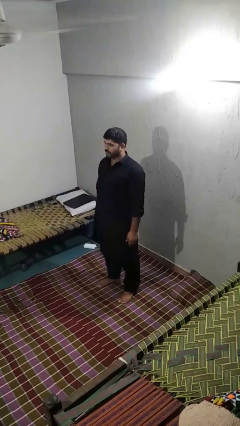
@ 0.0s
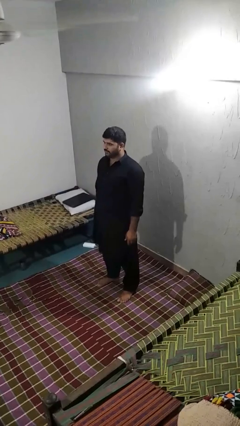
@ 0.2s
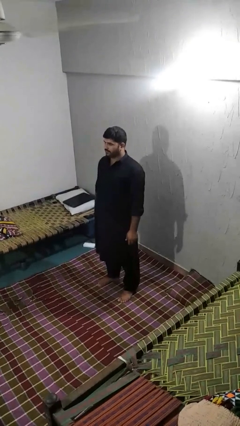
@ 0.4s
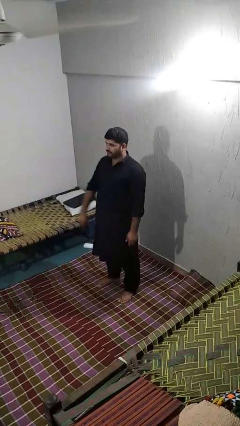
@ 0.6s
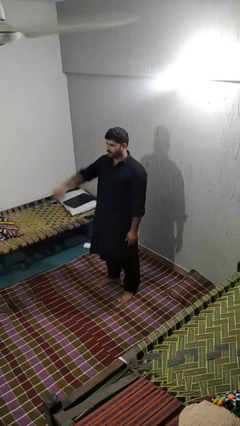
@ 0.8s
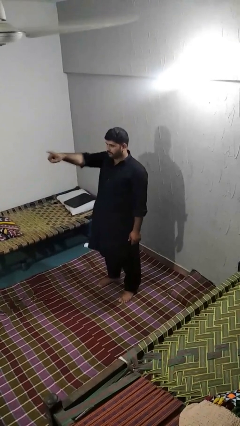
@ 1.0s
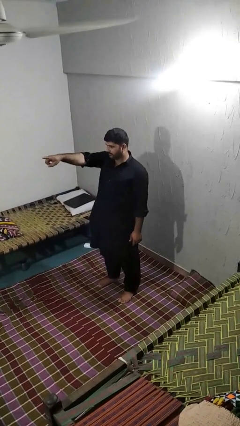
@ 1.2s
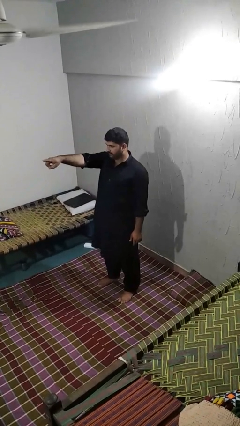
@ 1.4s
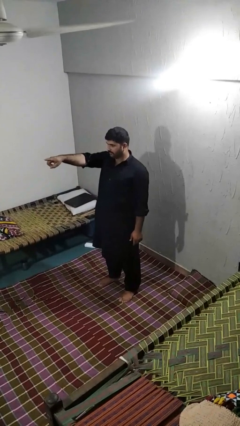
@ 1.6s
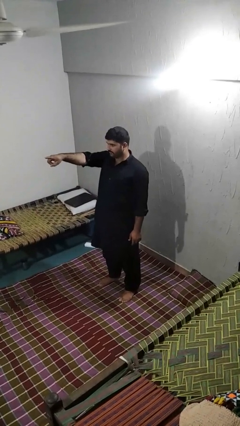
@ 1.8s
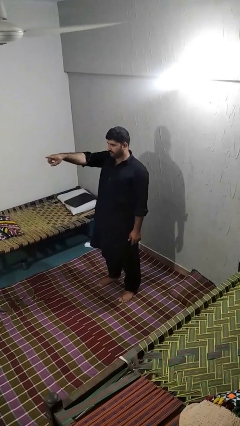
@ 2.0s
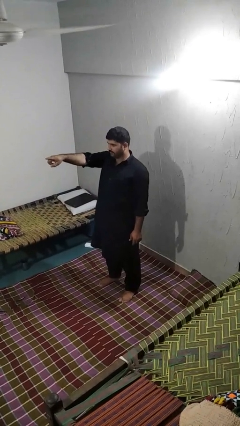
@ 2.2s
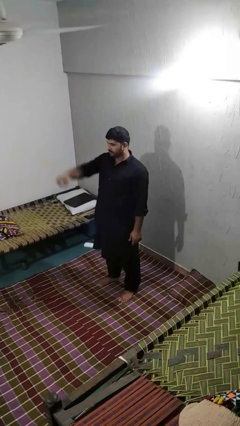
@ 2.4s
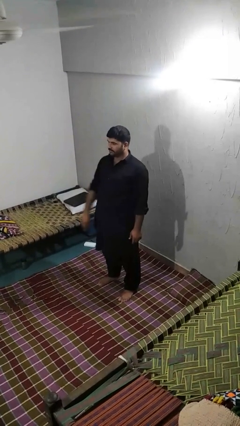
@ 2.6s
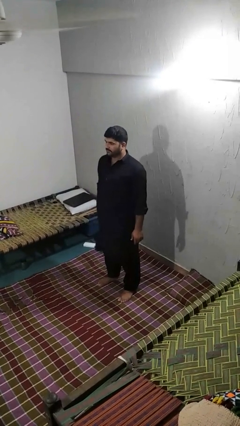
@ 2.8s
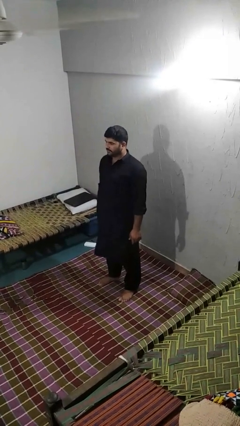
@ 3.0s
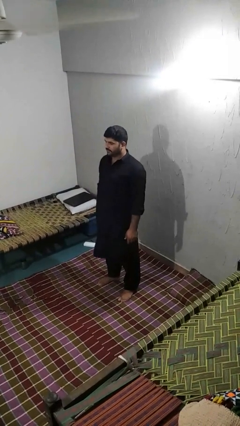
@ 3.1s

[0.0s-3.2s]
person points at person

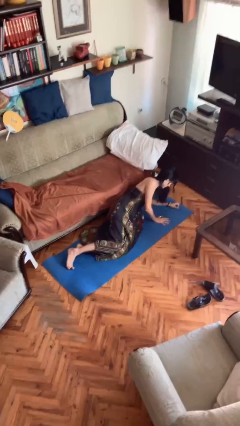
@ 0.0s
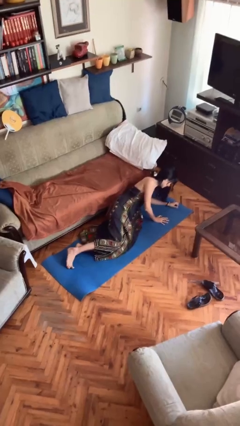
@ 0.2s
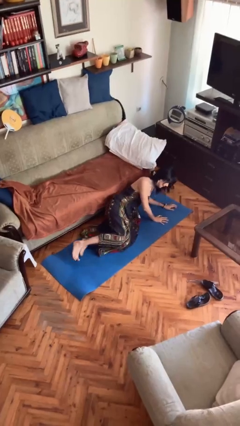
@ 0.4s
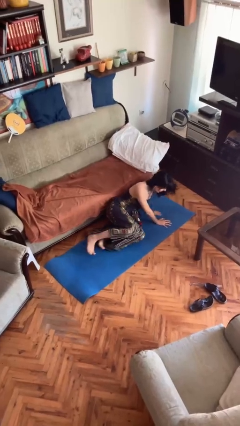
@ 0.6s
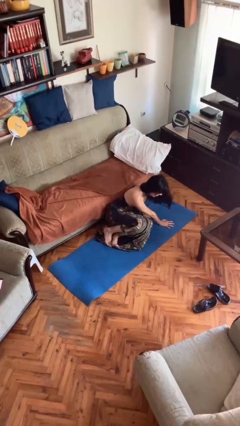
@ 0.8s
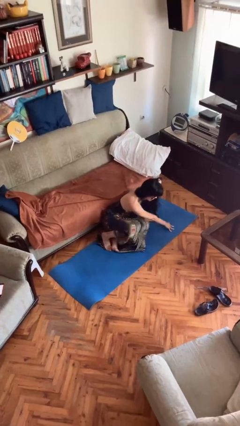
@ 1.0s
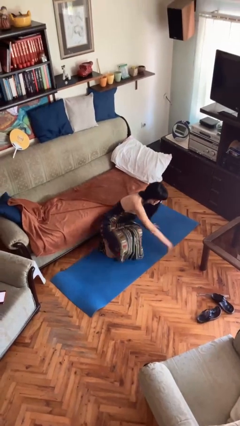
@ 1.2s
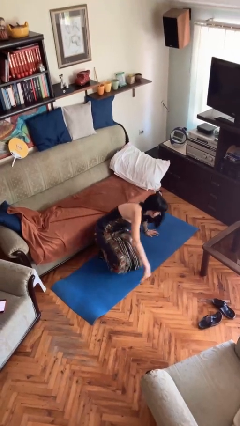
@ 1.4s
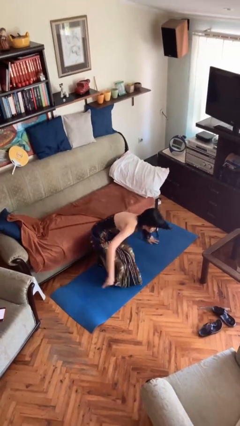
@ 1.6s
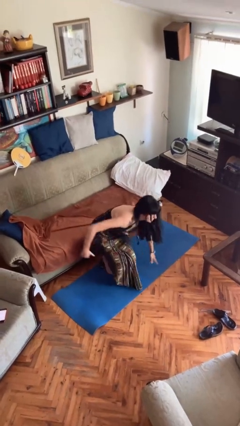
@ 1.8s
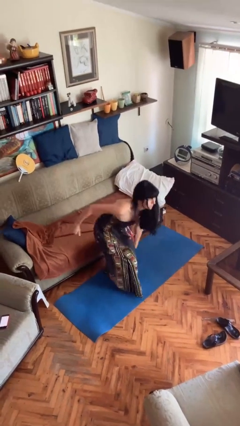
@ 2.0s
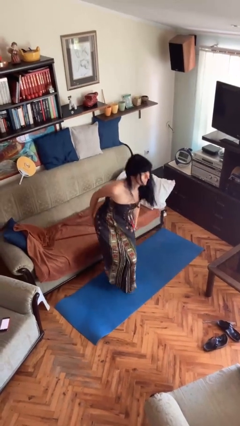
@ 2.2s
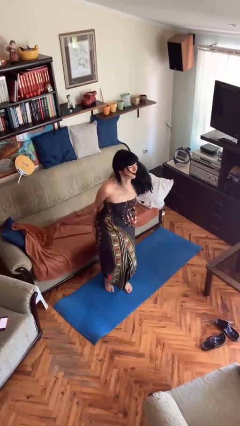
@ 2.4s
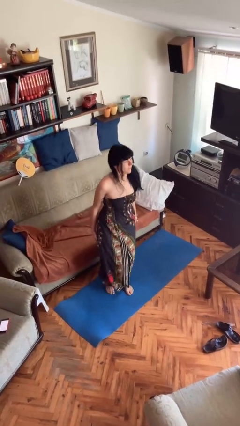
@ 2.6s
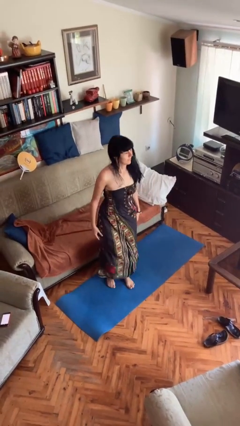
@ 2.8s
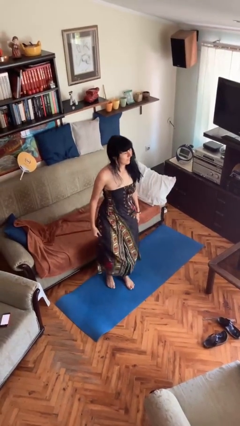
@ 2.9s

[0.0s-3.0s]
person stands up from floor

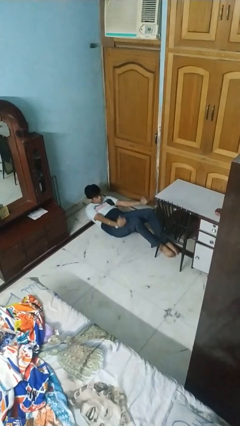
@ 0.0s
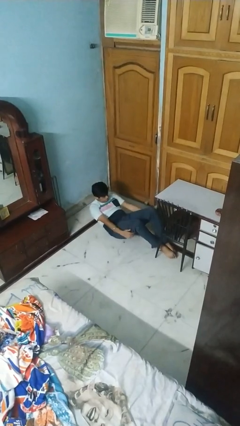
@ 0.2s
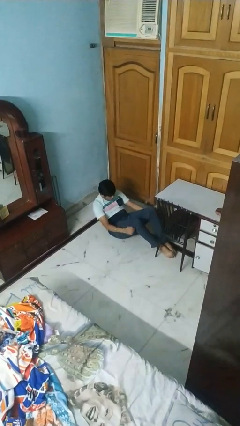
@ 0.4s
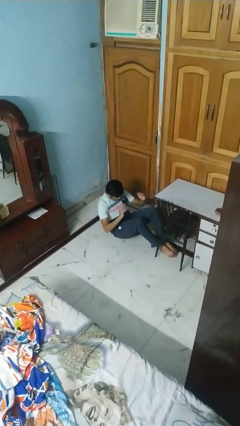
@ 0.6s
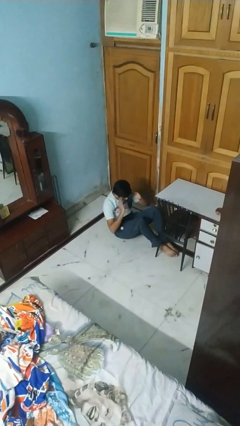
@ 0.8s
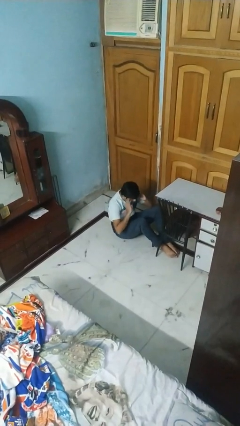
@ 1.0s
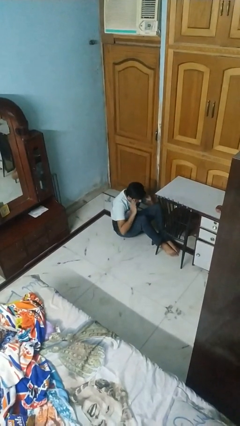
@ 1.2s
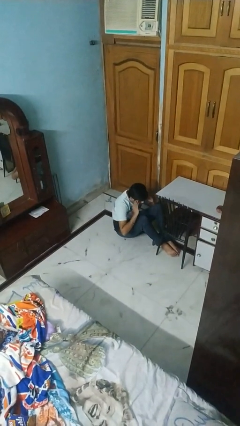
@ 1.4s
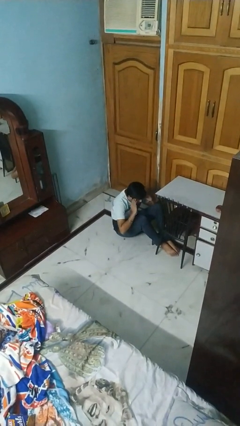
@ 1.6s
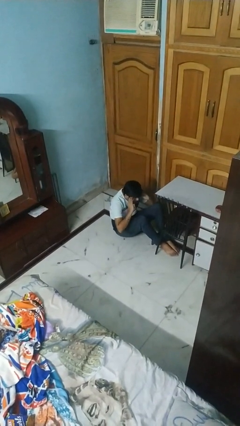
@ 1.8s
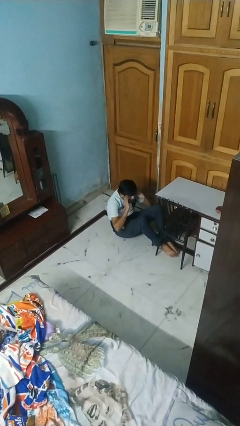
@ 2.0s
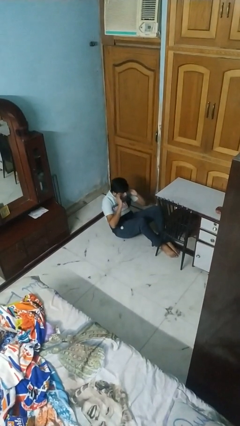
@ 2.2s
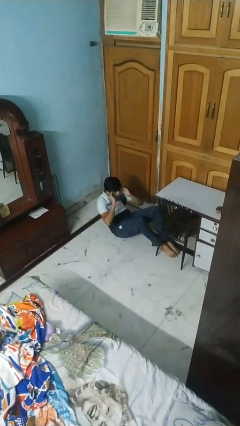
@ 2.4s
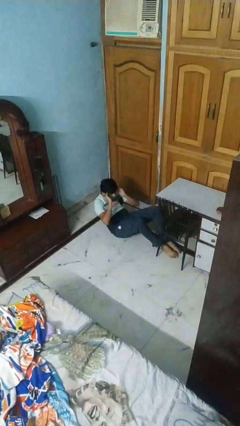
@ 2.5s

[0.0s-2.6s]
person exercises with situp

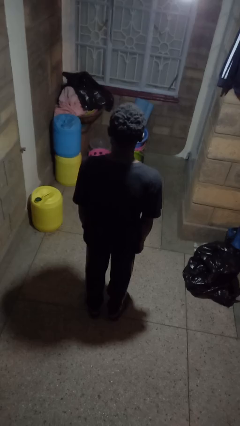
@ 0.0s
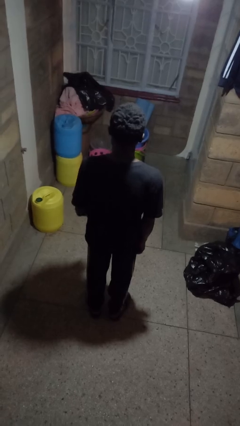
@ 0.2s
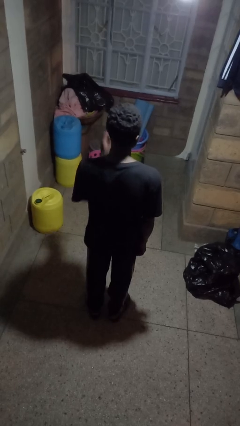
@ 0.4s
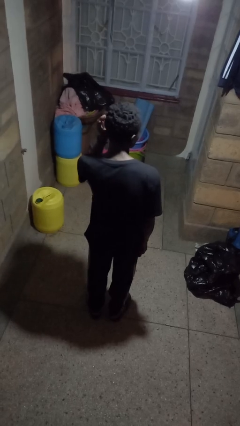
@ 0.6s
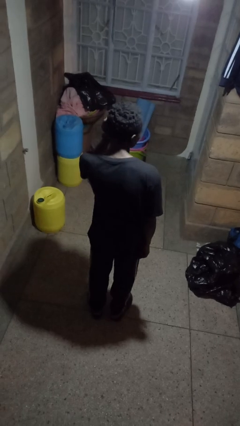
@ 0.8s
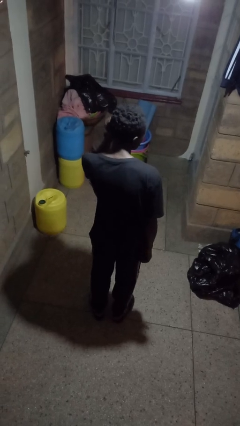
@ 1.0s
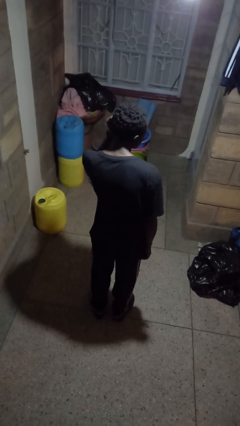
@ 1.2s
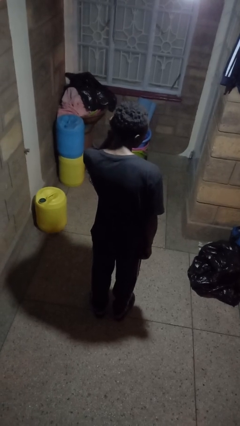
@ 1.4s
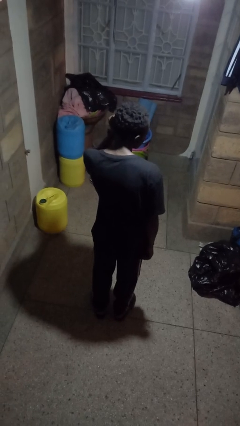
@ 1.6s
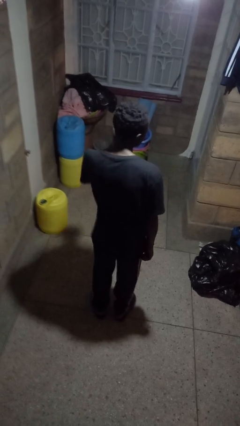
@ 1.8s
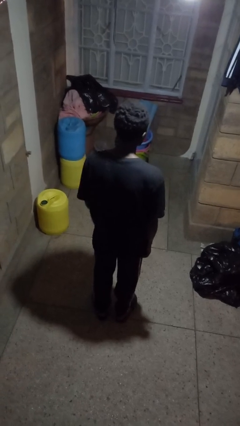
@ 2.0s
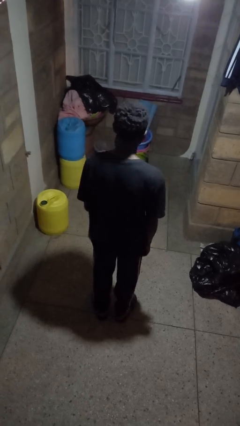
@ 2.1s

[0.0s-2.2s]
person touches earlobe

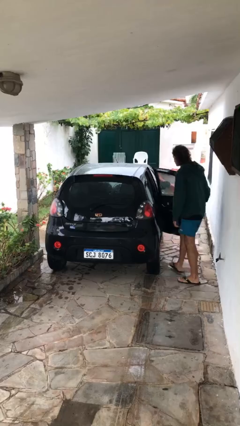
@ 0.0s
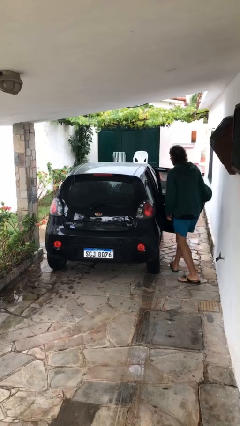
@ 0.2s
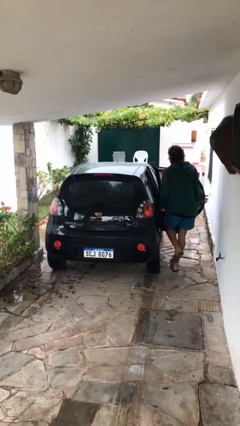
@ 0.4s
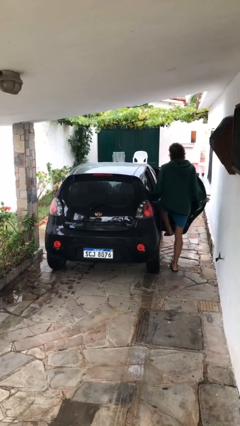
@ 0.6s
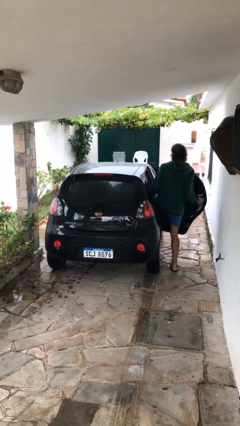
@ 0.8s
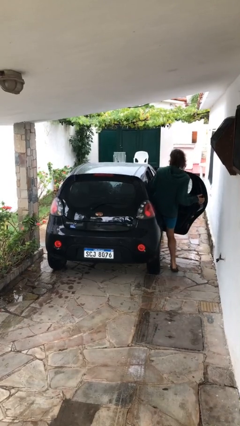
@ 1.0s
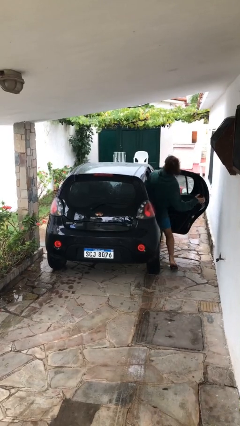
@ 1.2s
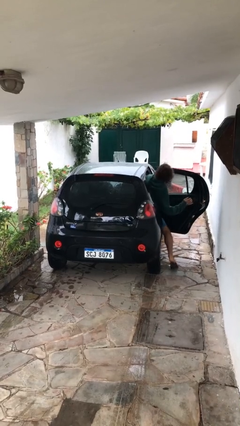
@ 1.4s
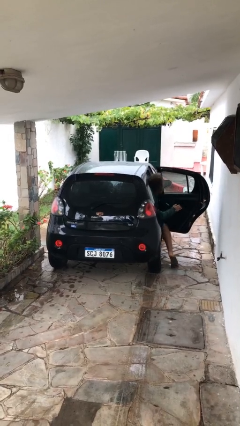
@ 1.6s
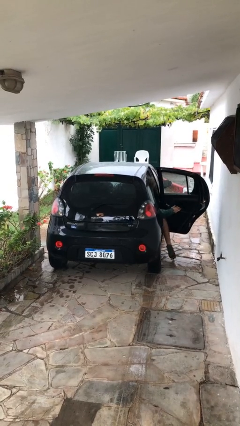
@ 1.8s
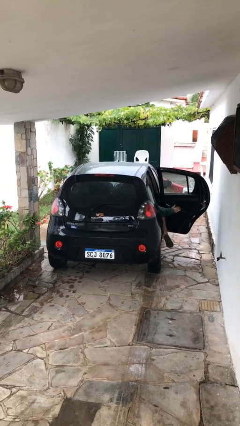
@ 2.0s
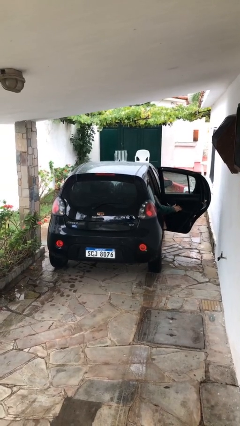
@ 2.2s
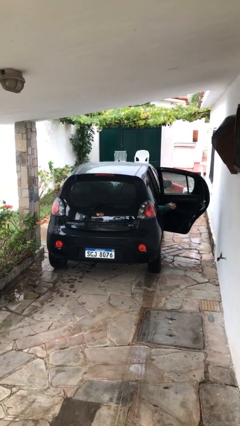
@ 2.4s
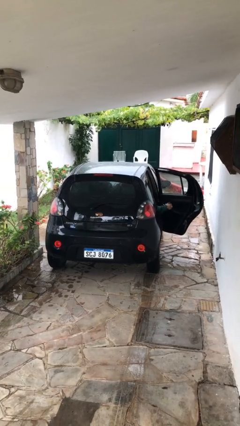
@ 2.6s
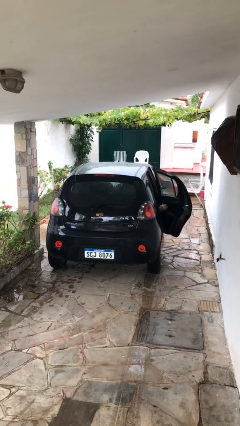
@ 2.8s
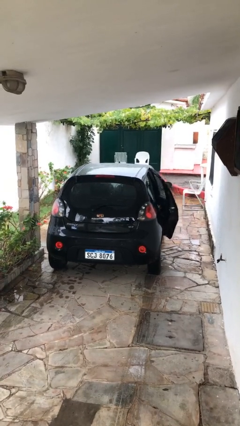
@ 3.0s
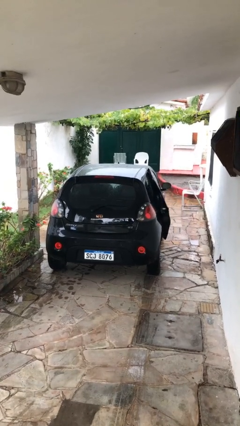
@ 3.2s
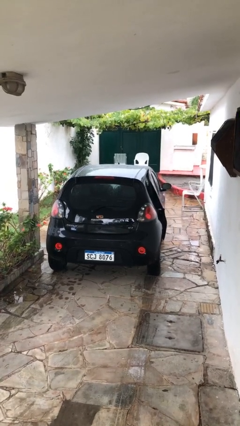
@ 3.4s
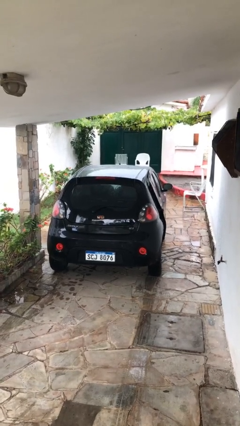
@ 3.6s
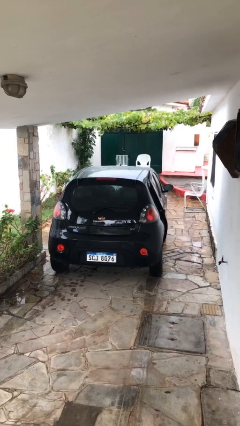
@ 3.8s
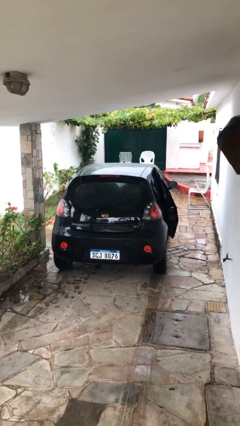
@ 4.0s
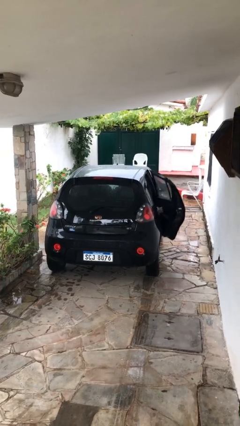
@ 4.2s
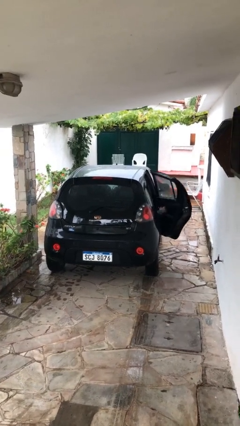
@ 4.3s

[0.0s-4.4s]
car picks up person

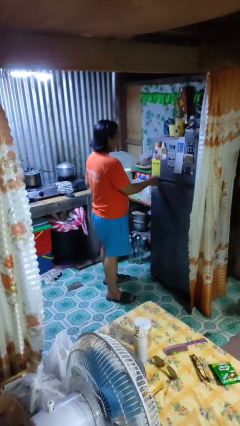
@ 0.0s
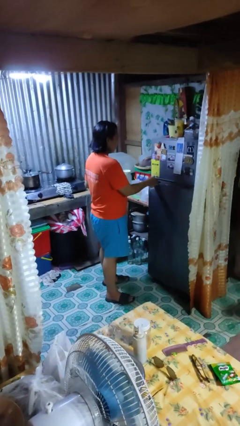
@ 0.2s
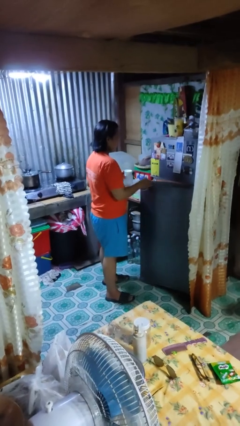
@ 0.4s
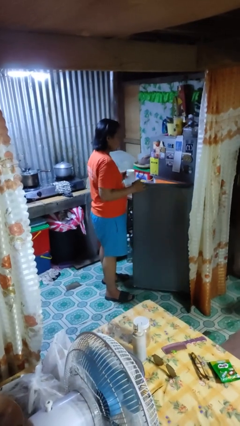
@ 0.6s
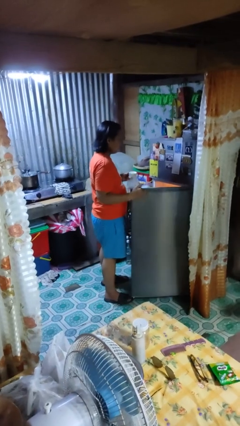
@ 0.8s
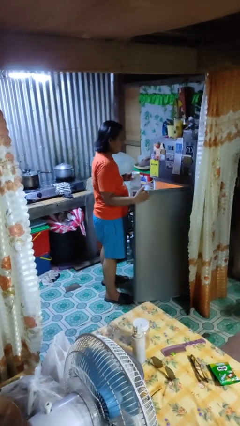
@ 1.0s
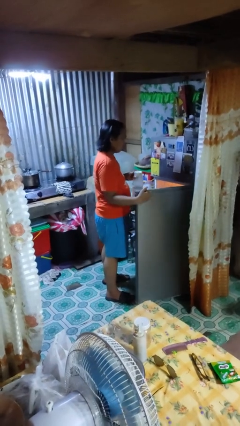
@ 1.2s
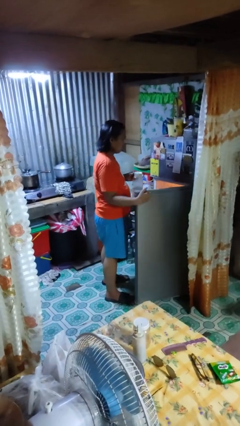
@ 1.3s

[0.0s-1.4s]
person opens refrigerator

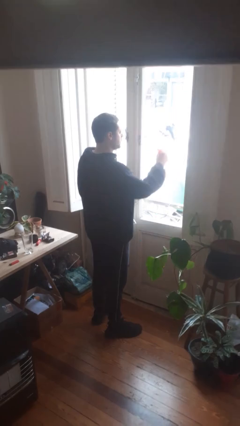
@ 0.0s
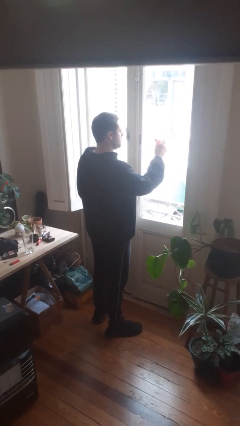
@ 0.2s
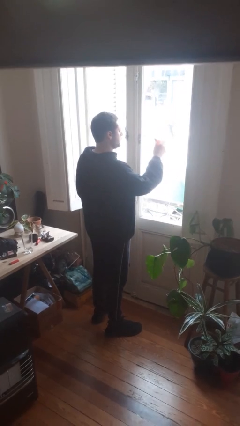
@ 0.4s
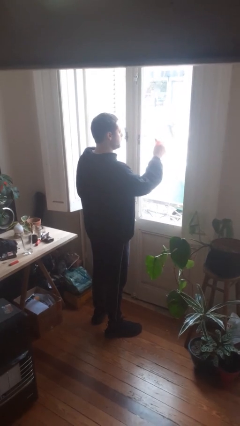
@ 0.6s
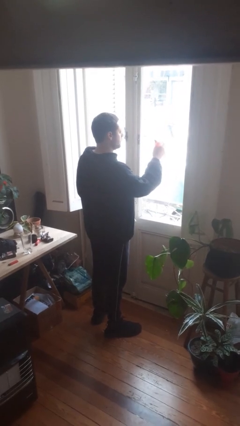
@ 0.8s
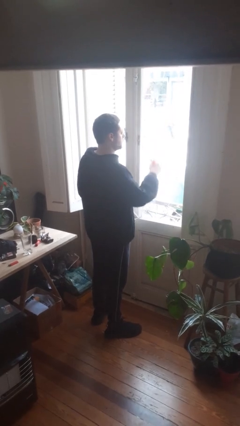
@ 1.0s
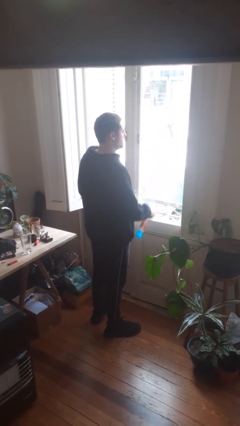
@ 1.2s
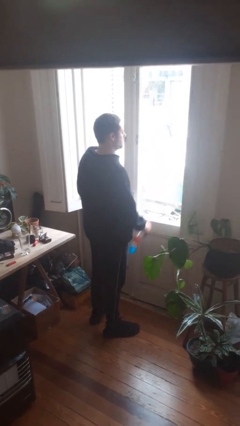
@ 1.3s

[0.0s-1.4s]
person sprays from bottle
